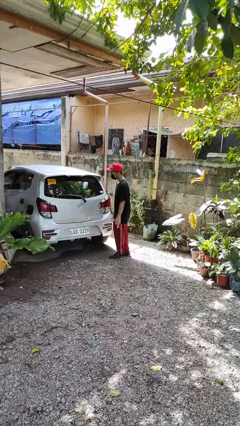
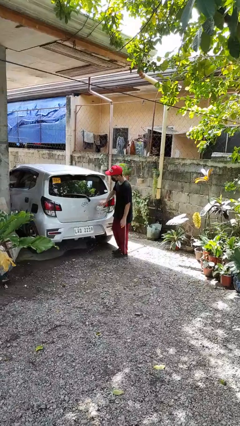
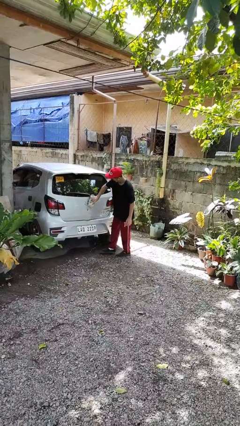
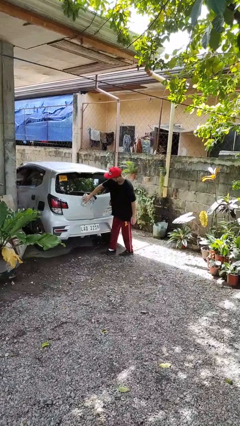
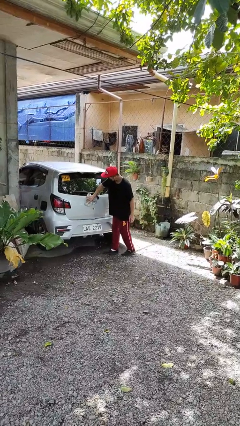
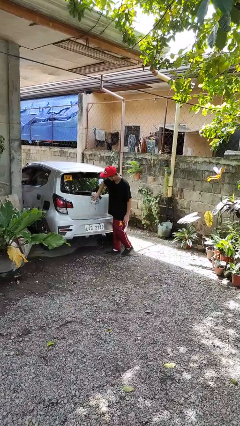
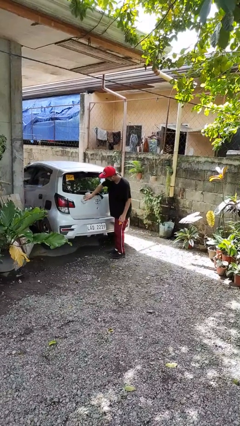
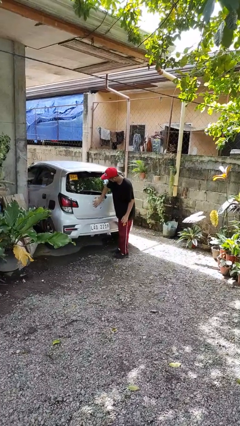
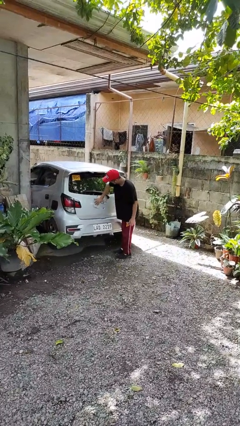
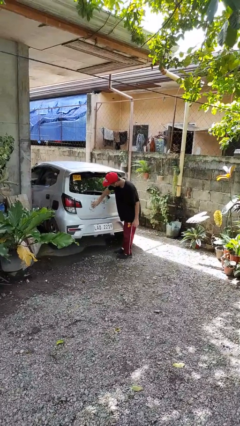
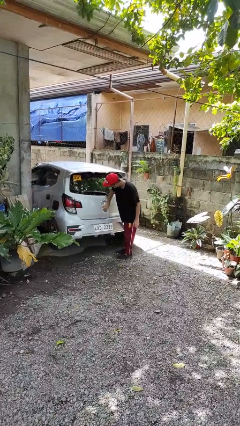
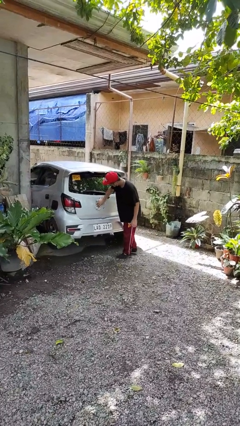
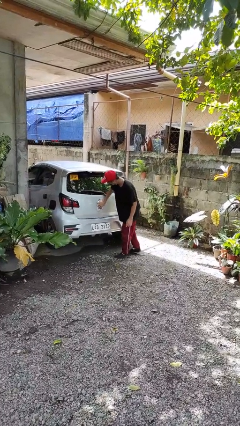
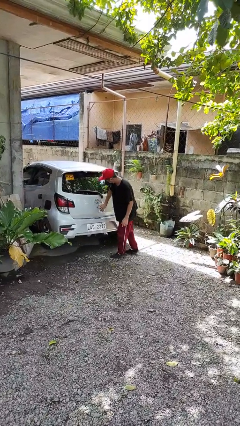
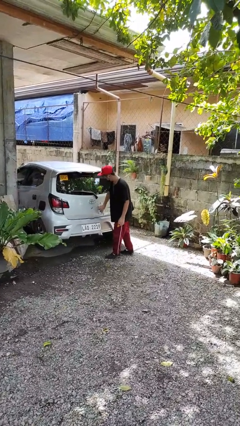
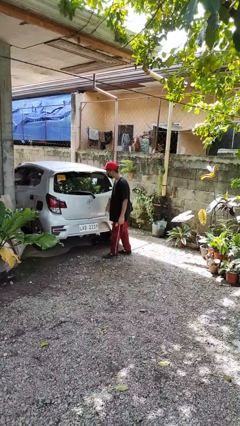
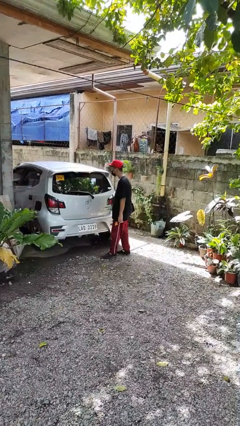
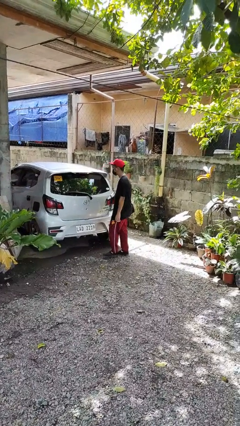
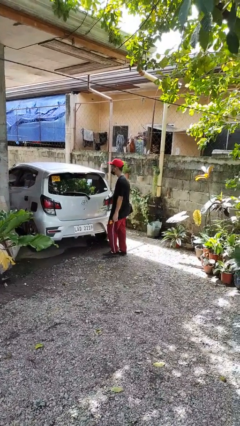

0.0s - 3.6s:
person polishes car with rag

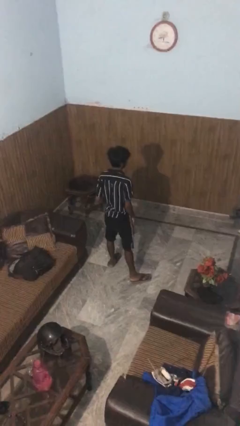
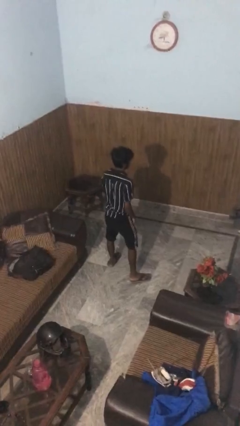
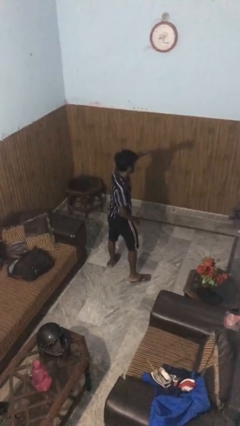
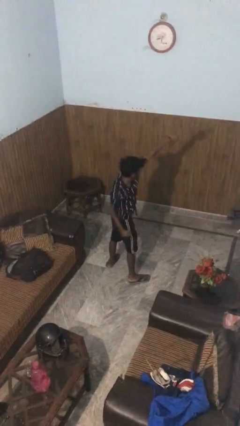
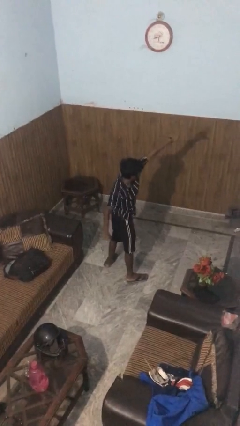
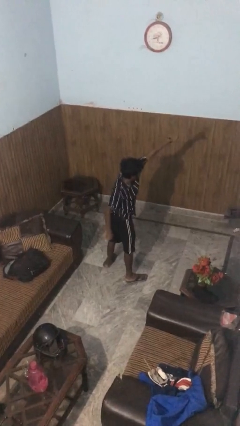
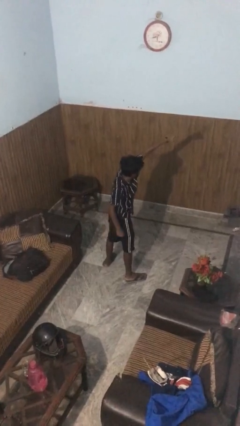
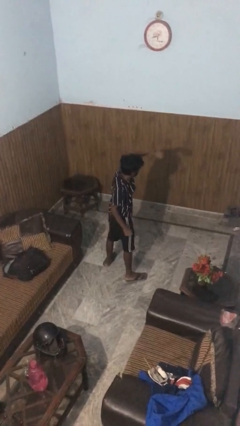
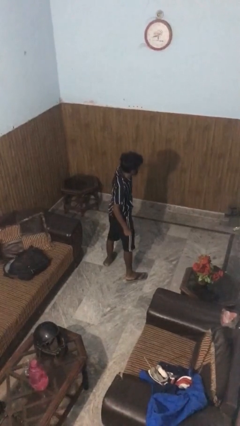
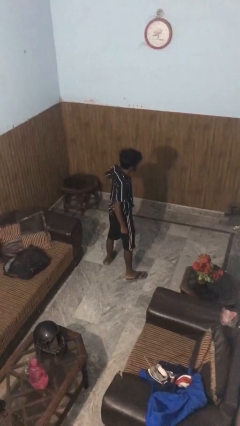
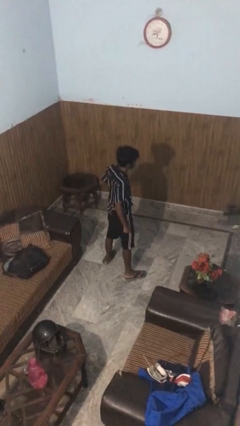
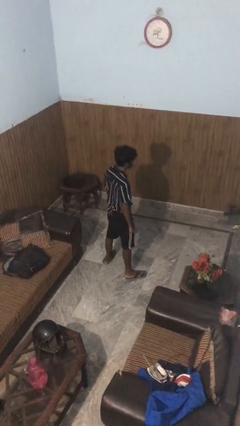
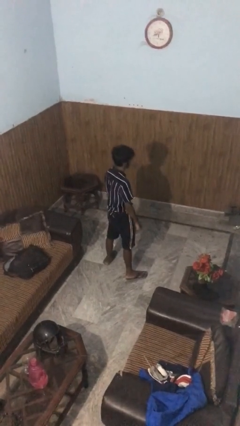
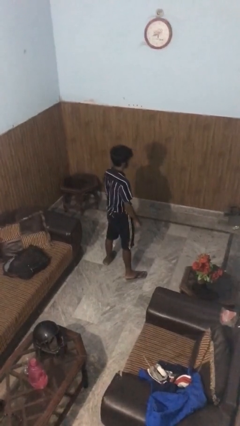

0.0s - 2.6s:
person punches

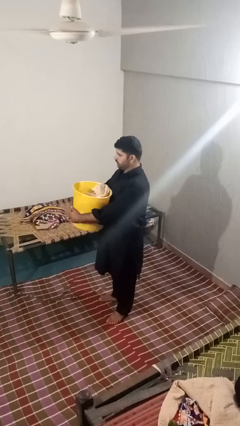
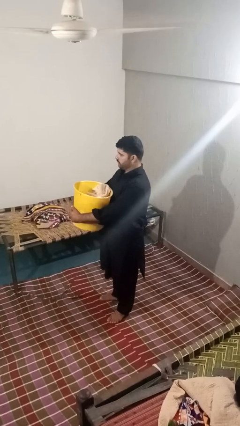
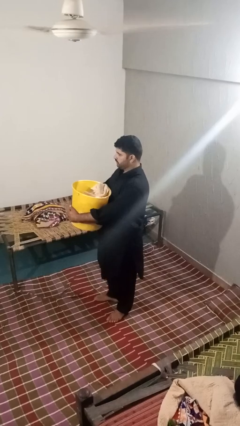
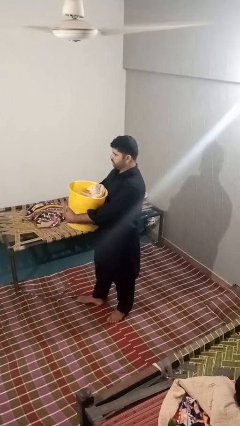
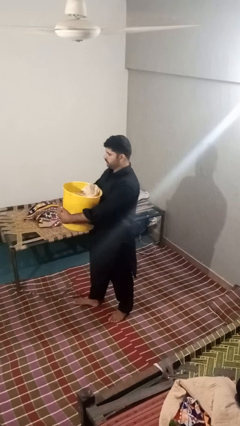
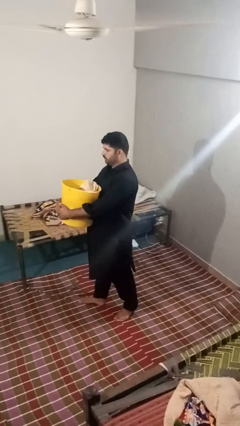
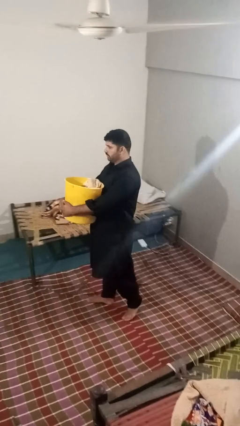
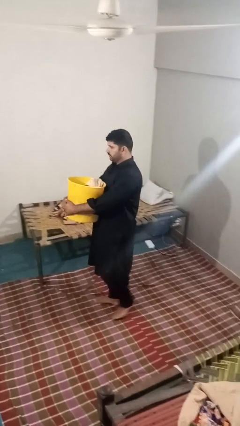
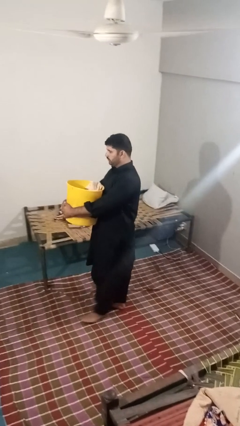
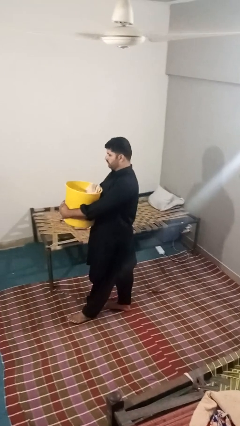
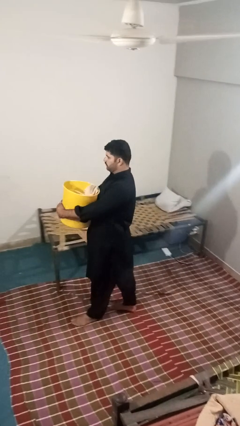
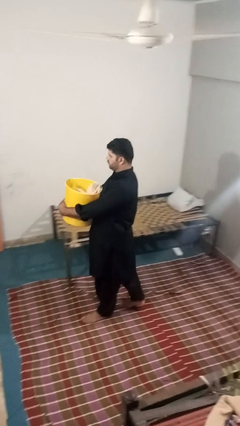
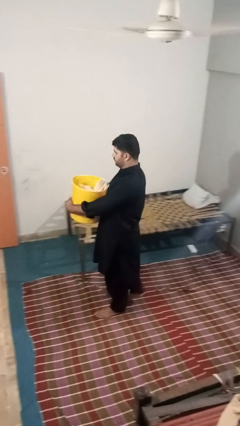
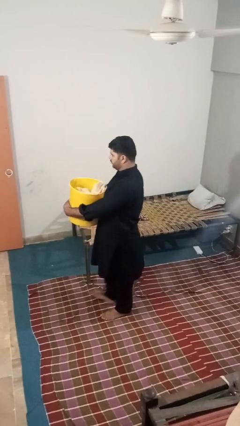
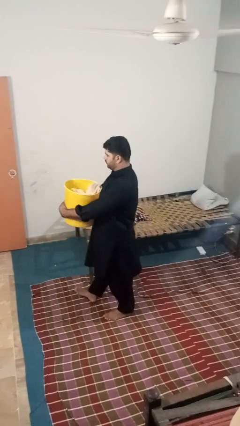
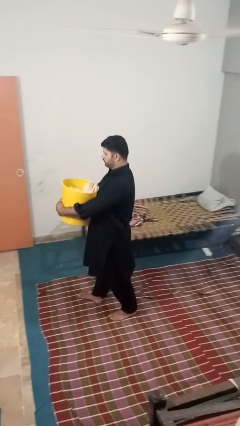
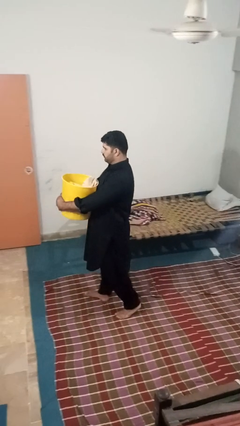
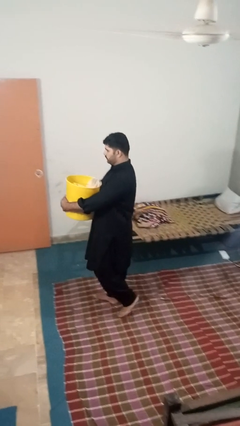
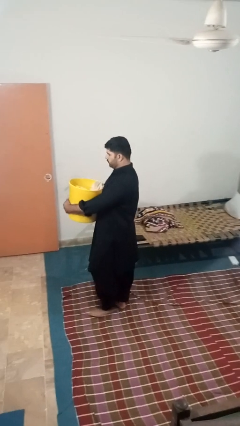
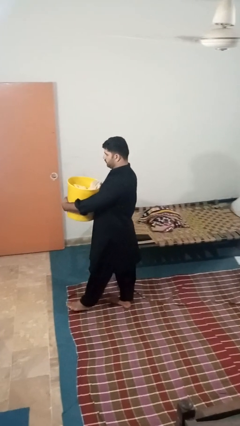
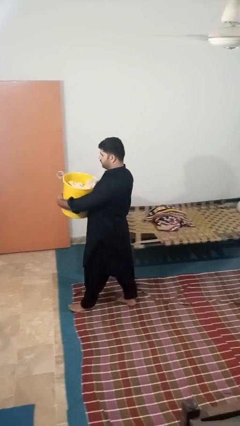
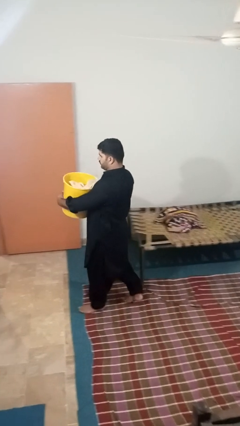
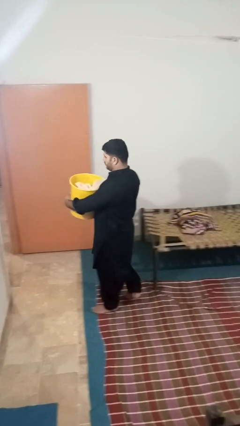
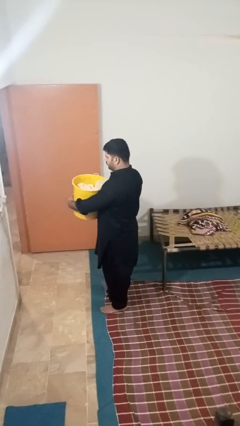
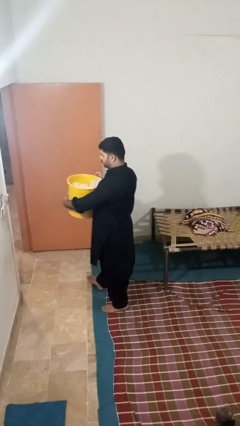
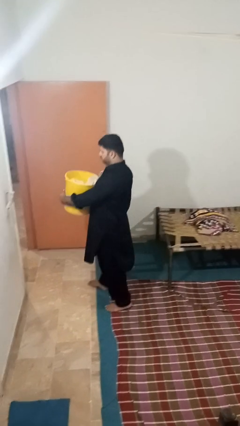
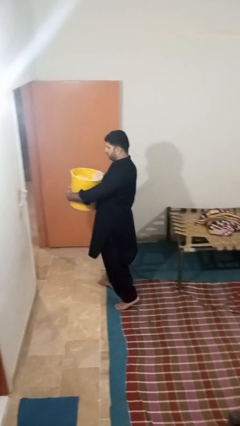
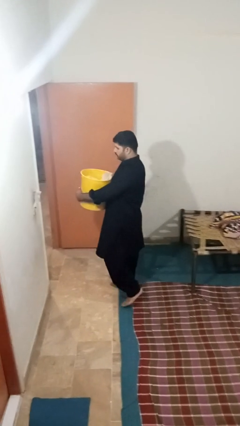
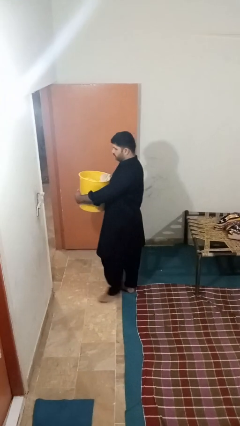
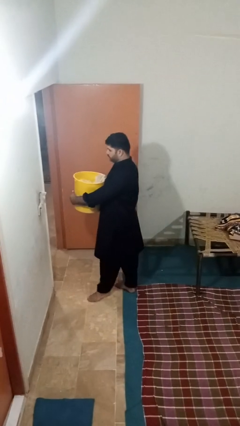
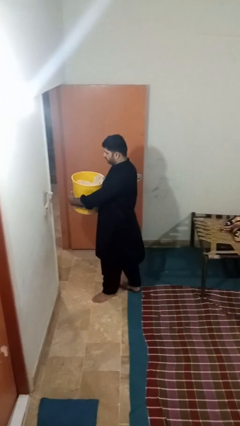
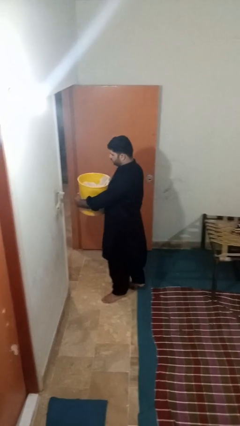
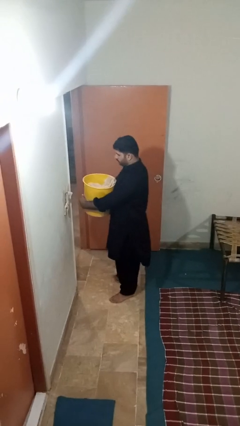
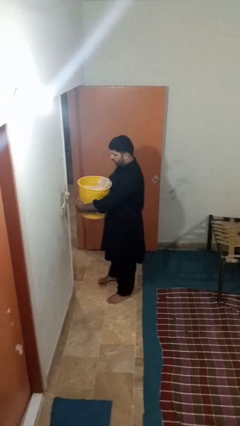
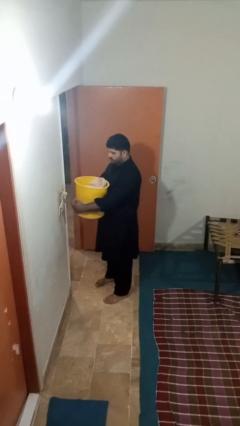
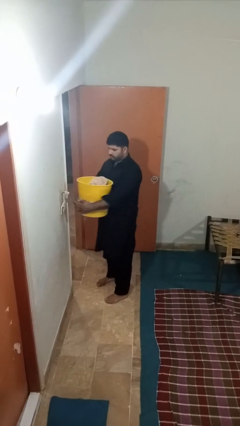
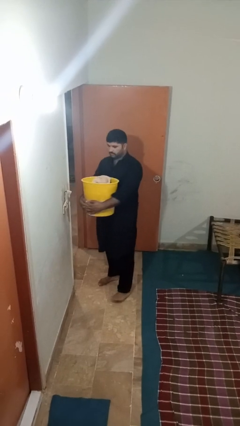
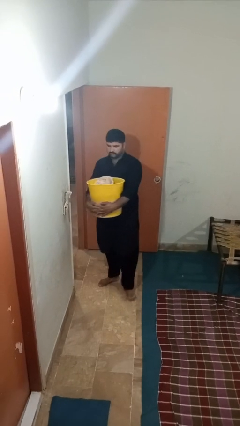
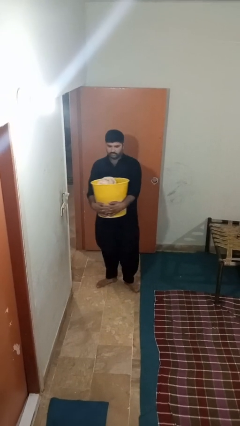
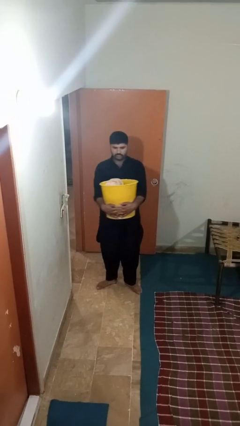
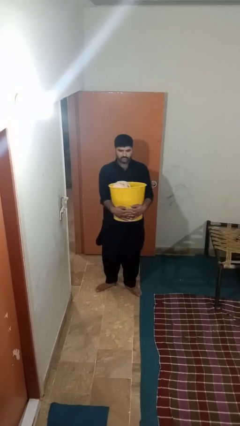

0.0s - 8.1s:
person carries laundry basket

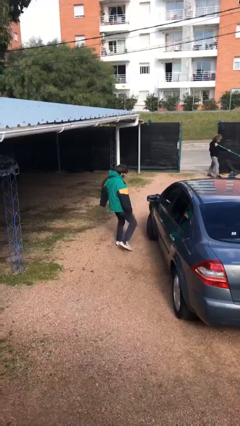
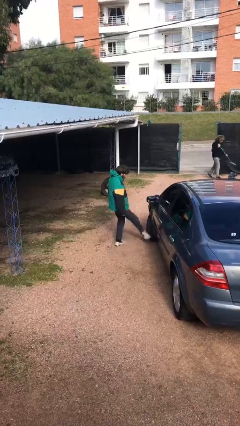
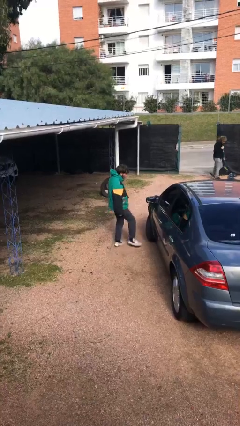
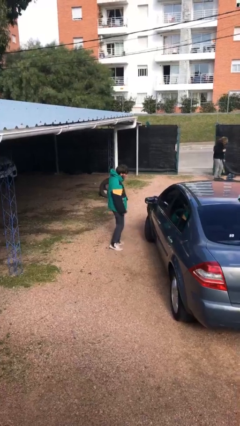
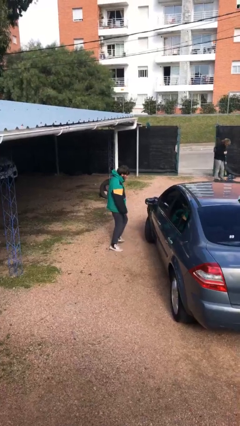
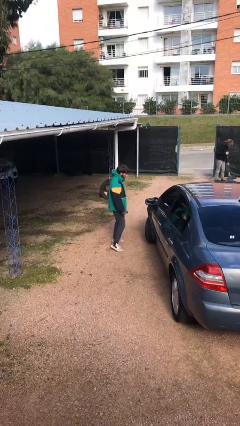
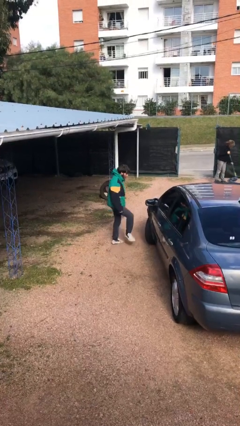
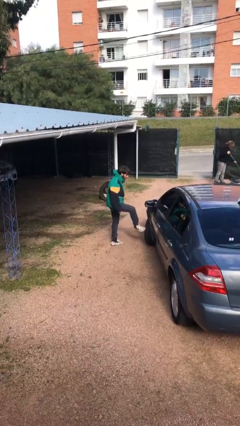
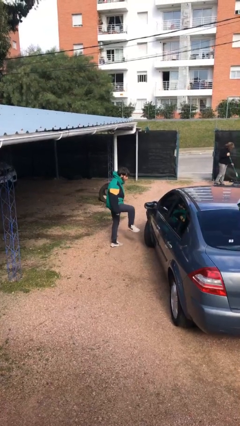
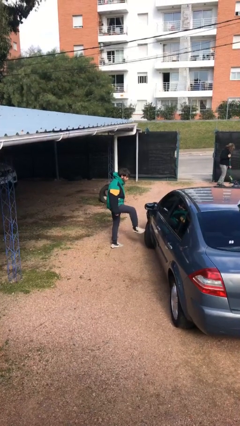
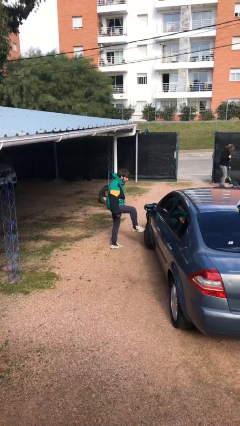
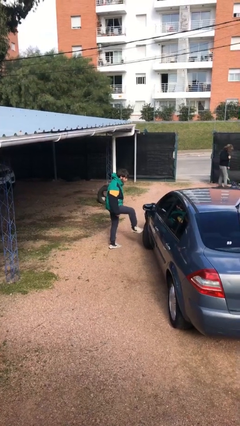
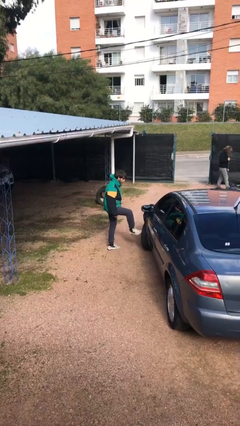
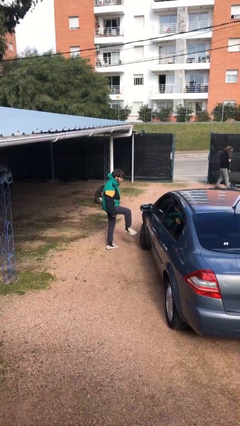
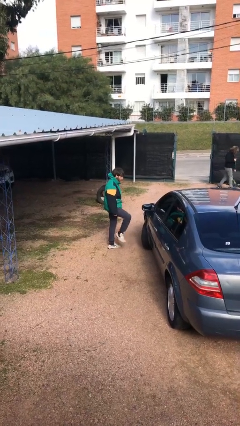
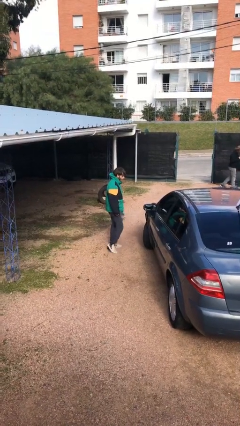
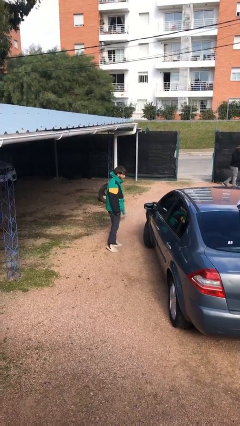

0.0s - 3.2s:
person kicks car tires

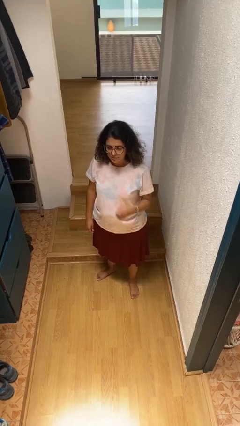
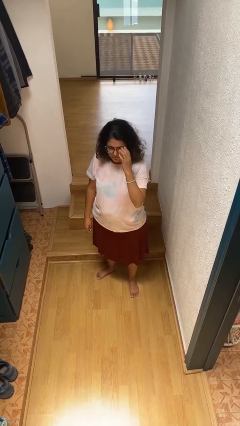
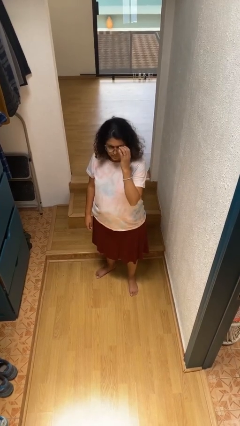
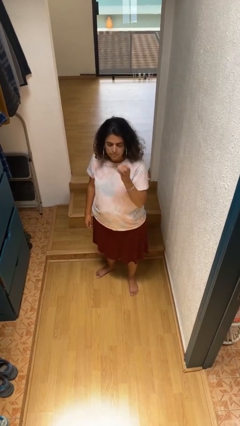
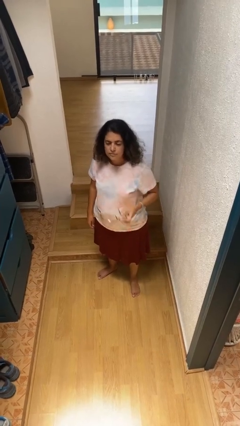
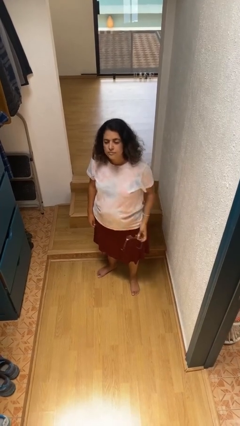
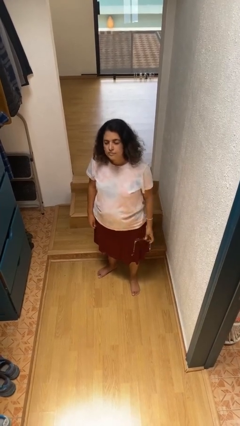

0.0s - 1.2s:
person takes off glasses
